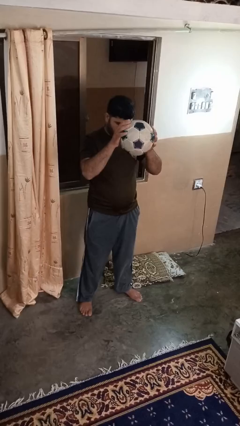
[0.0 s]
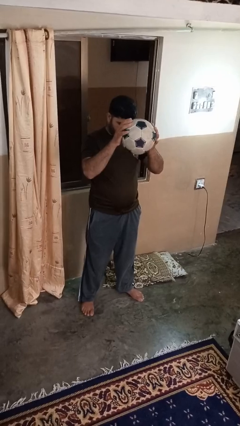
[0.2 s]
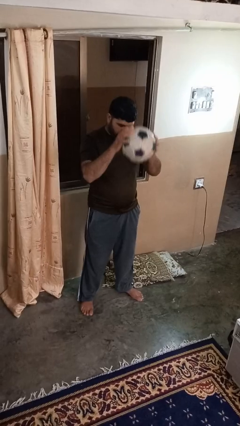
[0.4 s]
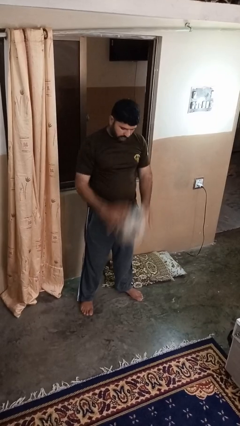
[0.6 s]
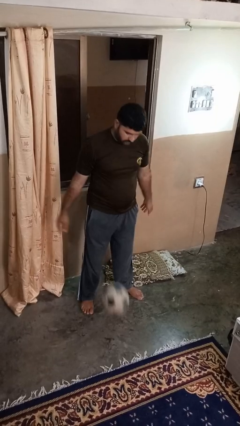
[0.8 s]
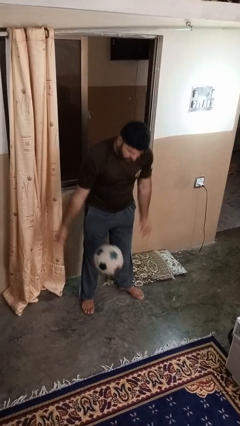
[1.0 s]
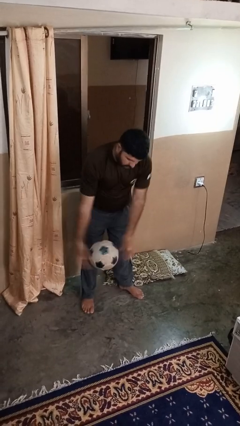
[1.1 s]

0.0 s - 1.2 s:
person bounces ball on floor

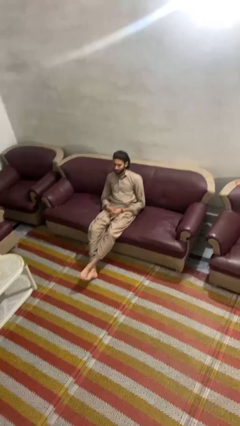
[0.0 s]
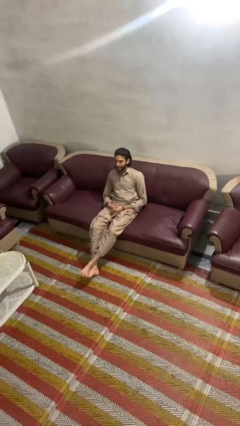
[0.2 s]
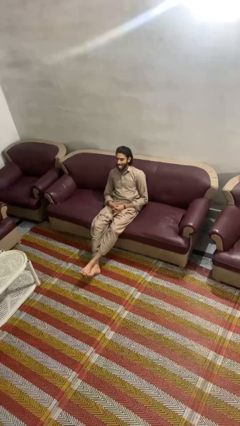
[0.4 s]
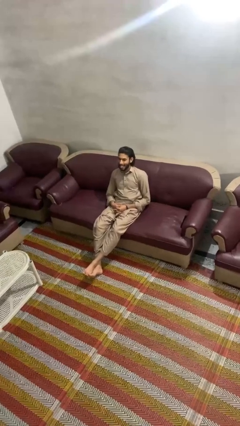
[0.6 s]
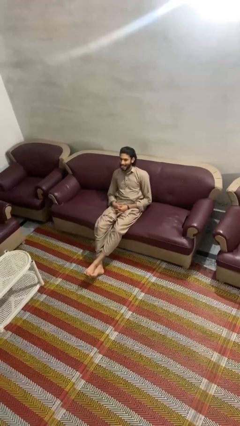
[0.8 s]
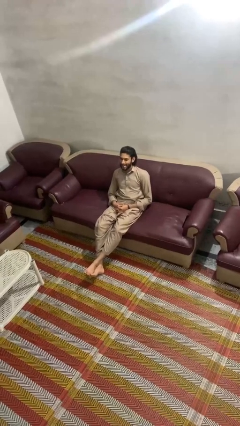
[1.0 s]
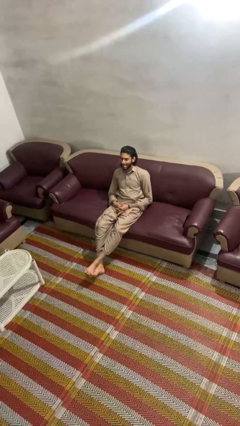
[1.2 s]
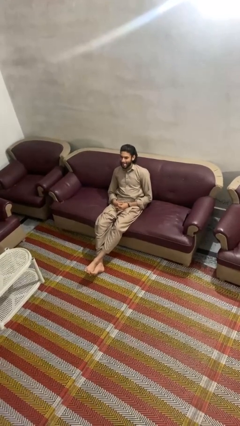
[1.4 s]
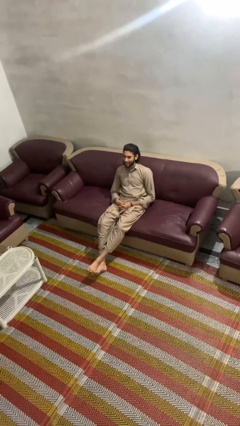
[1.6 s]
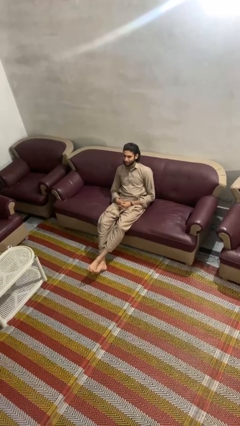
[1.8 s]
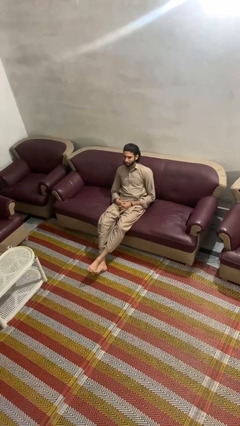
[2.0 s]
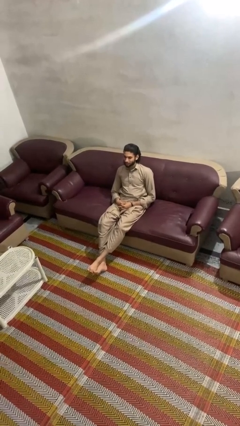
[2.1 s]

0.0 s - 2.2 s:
person sticks out tongue

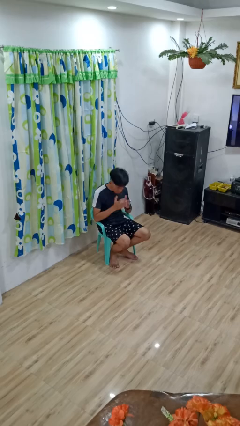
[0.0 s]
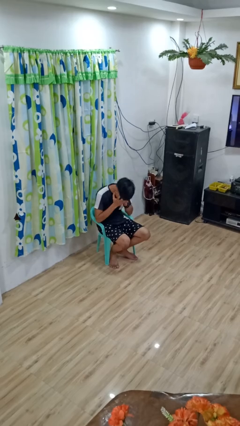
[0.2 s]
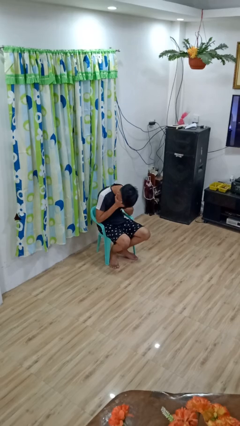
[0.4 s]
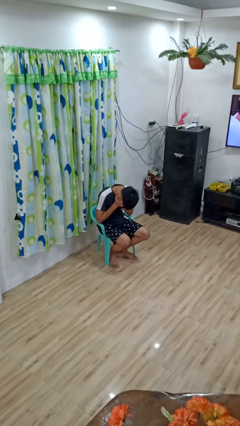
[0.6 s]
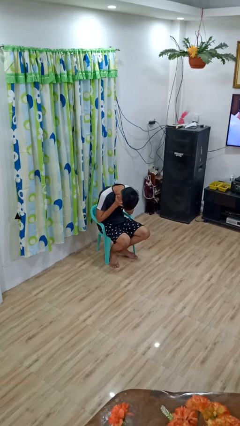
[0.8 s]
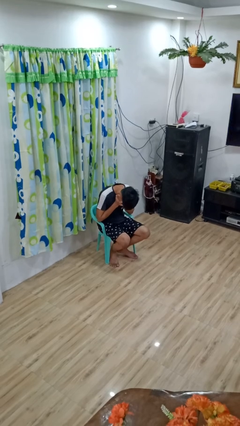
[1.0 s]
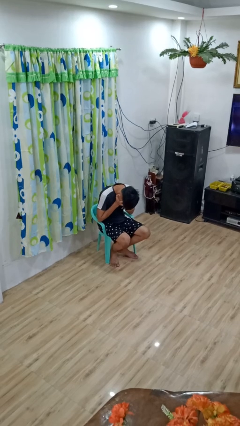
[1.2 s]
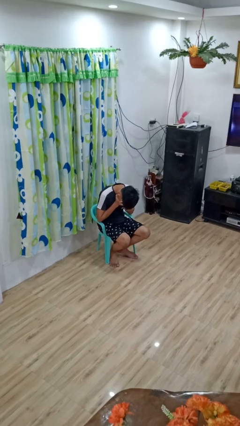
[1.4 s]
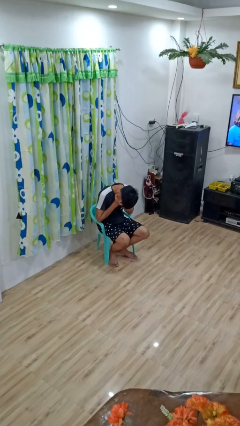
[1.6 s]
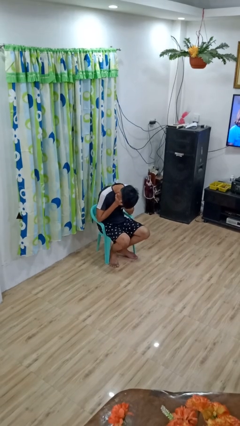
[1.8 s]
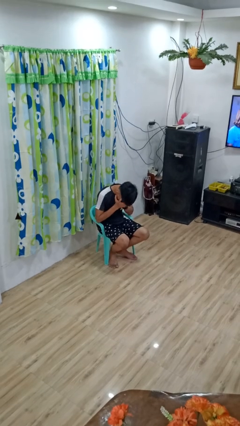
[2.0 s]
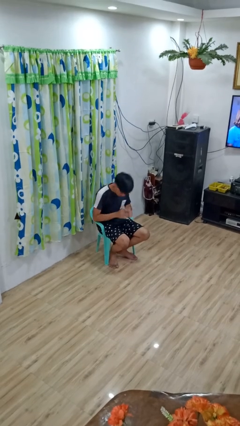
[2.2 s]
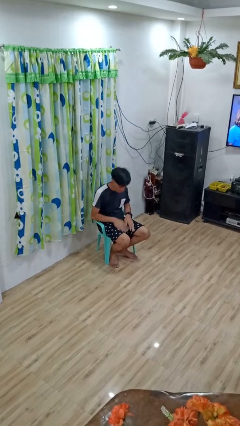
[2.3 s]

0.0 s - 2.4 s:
person covers face with hands

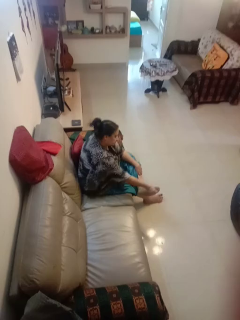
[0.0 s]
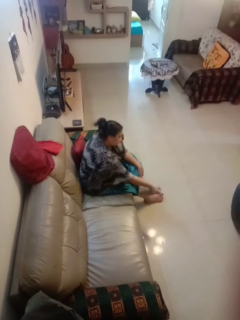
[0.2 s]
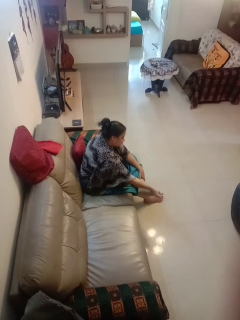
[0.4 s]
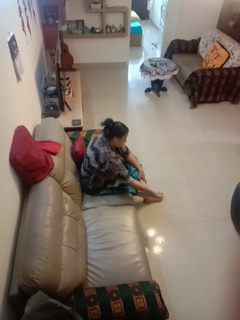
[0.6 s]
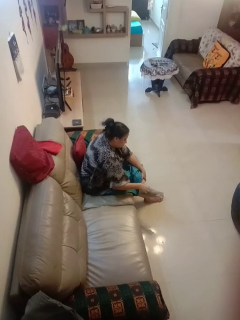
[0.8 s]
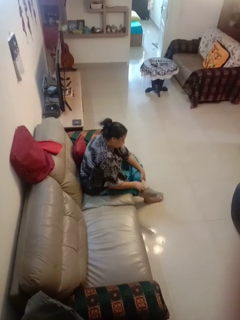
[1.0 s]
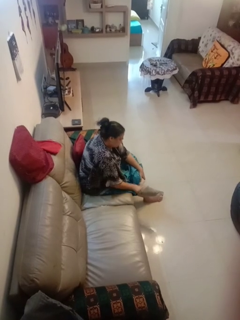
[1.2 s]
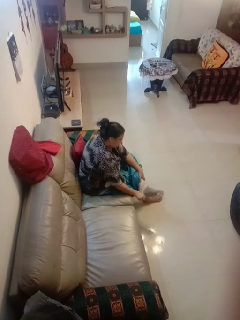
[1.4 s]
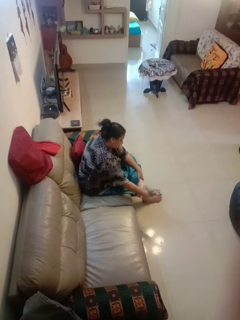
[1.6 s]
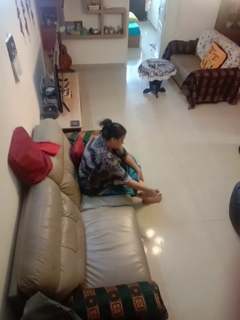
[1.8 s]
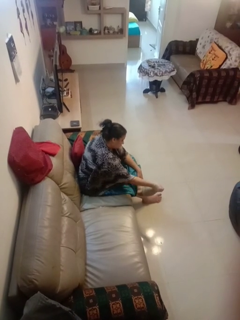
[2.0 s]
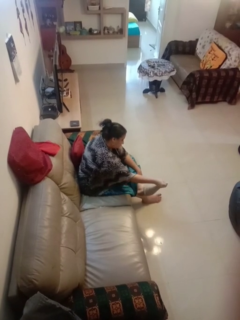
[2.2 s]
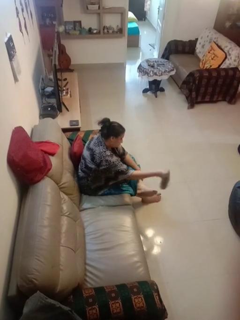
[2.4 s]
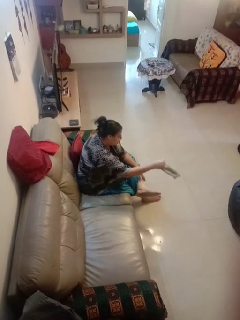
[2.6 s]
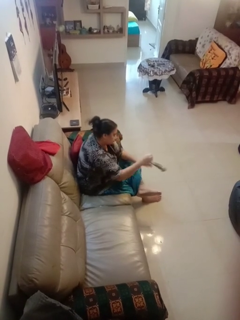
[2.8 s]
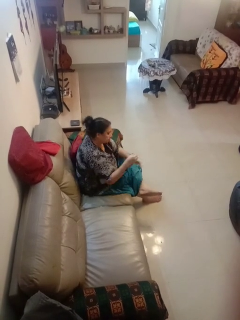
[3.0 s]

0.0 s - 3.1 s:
person takes off socks

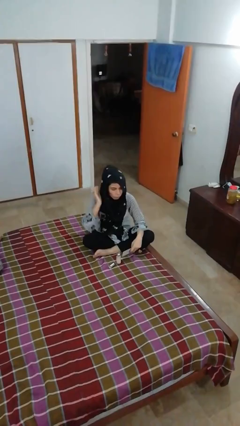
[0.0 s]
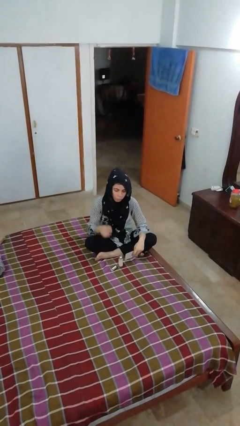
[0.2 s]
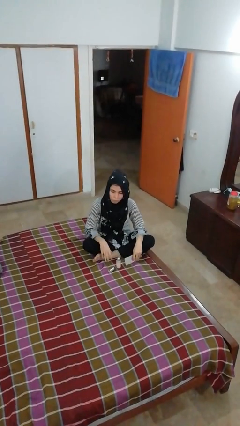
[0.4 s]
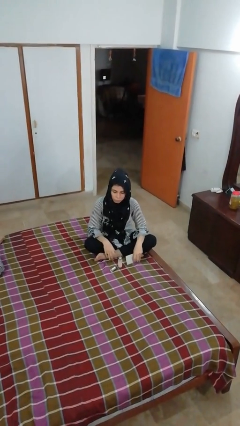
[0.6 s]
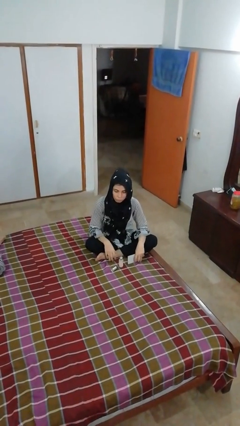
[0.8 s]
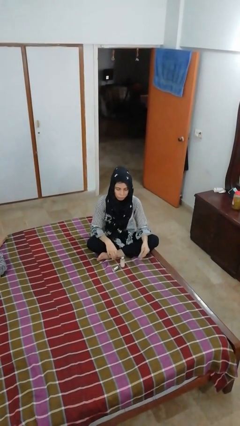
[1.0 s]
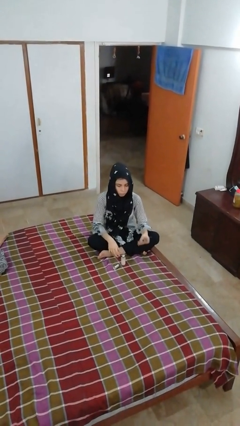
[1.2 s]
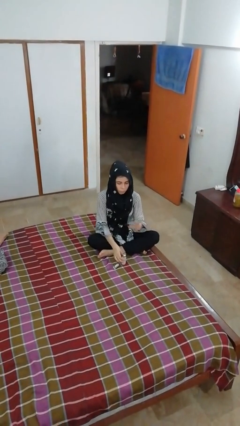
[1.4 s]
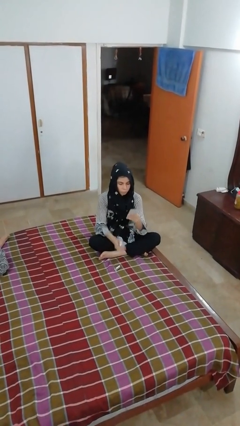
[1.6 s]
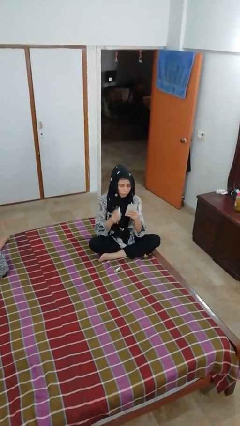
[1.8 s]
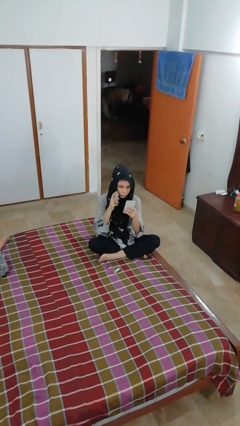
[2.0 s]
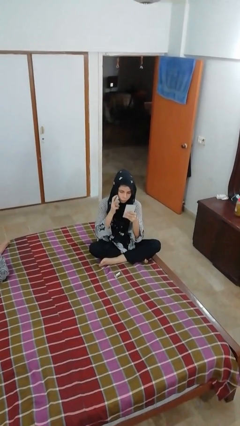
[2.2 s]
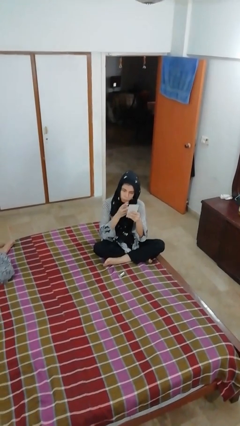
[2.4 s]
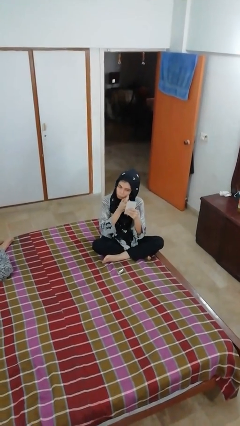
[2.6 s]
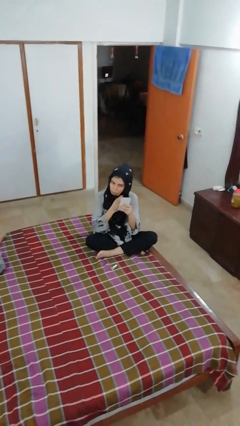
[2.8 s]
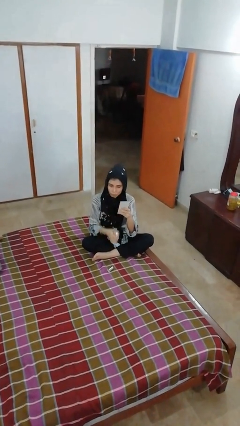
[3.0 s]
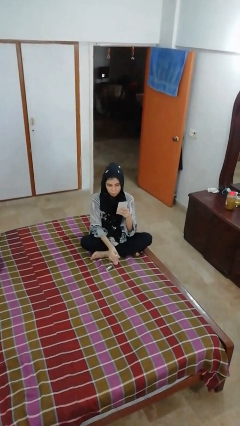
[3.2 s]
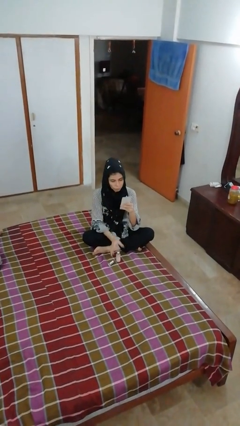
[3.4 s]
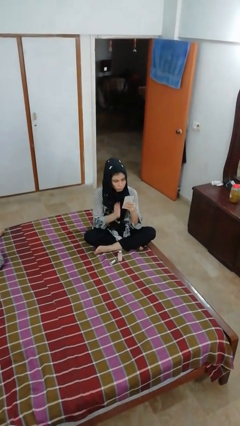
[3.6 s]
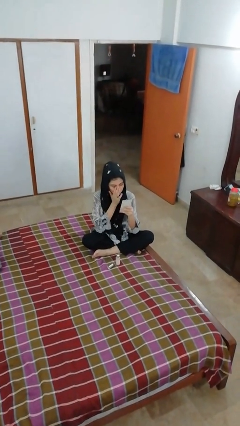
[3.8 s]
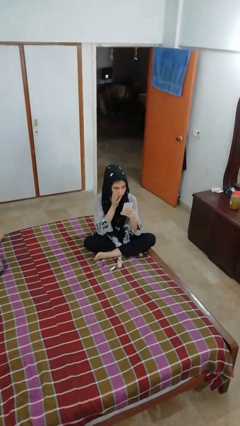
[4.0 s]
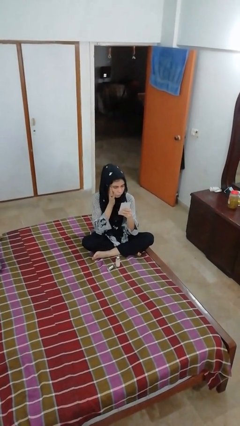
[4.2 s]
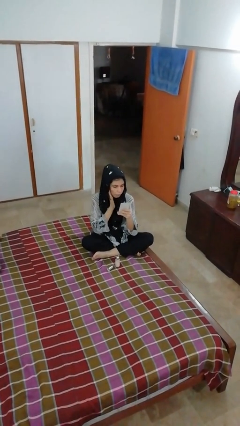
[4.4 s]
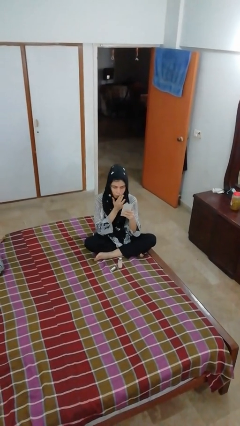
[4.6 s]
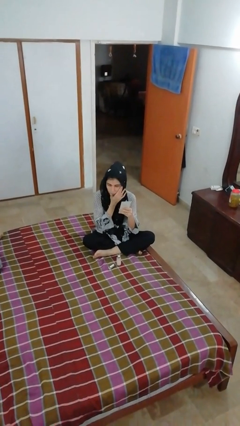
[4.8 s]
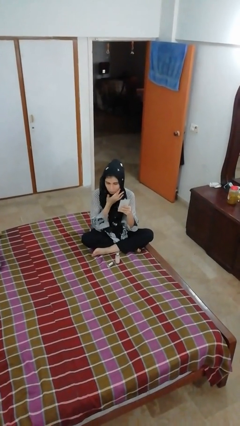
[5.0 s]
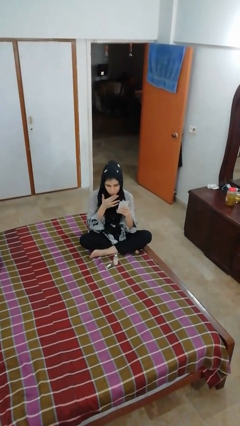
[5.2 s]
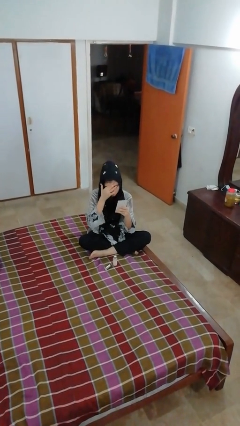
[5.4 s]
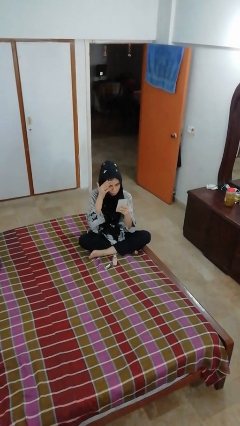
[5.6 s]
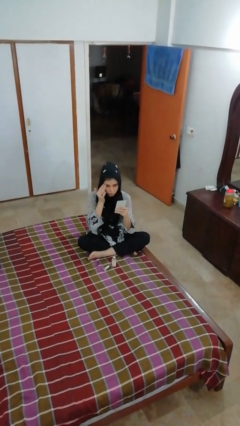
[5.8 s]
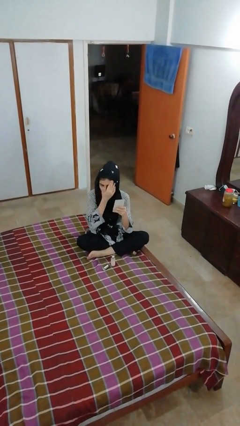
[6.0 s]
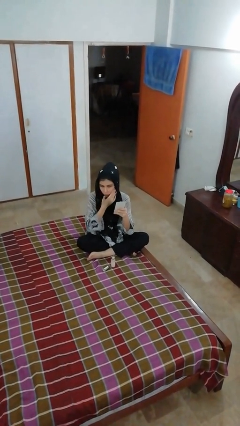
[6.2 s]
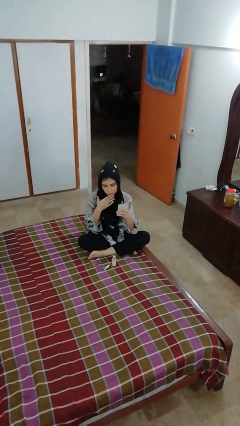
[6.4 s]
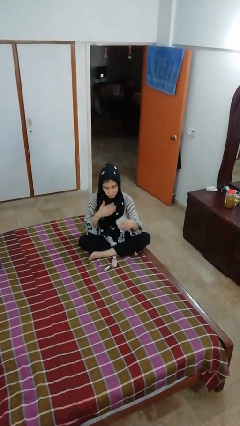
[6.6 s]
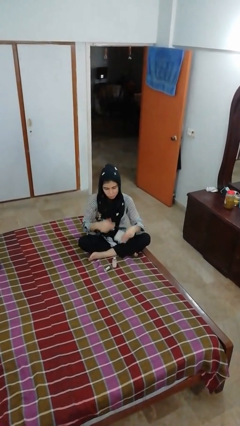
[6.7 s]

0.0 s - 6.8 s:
person applies foundation makeup

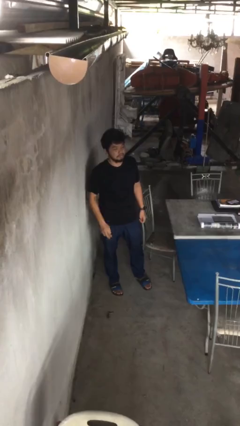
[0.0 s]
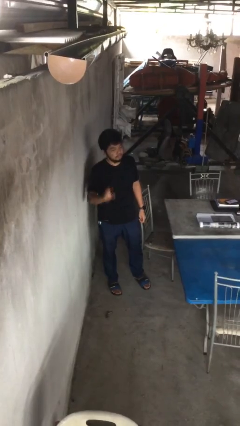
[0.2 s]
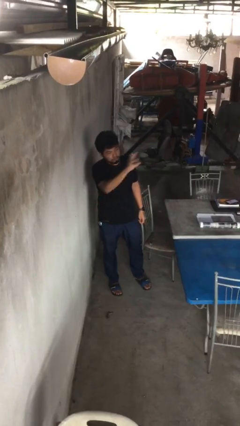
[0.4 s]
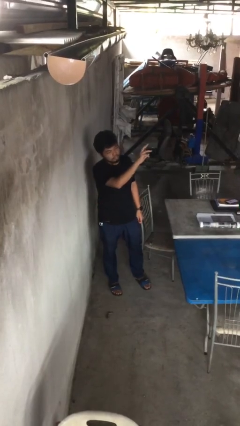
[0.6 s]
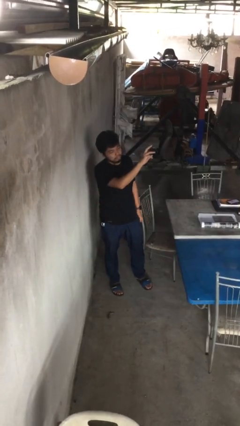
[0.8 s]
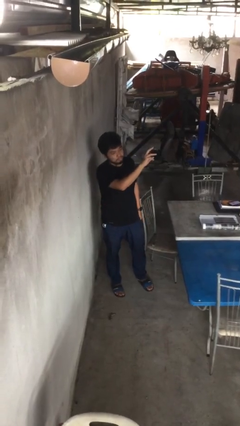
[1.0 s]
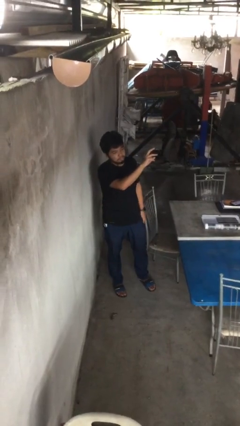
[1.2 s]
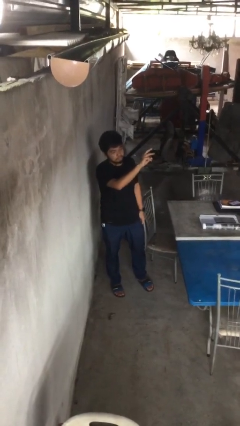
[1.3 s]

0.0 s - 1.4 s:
person gestures swipe left

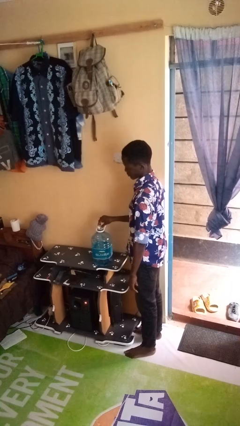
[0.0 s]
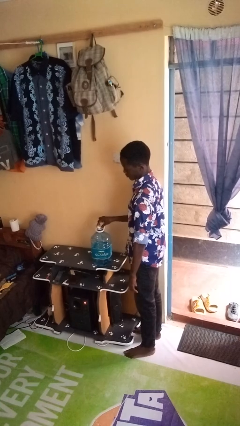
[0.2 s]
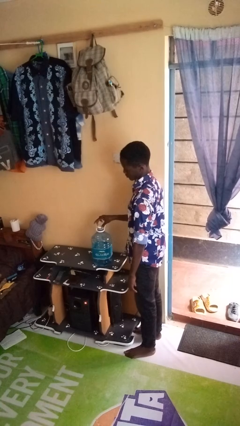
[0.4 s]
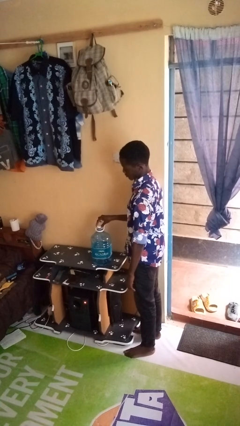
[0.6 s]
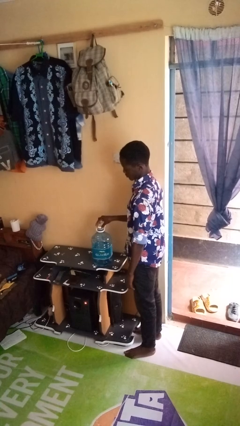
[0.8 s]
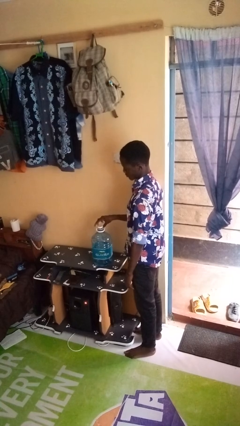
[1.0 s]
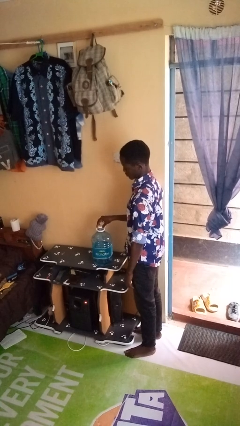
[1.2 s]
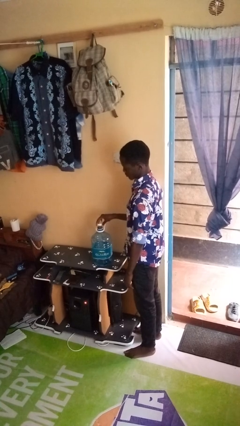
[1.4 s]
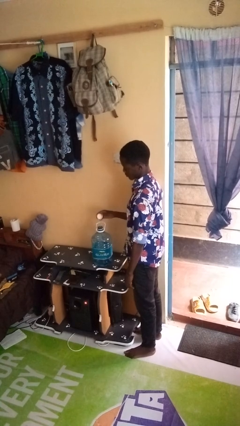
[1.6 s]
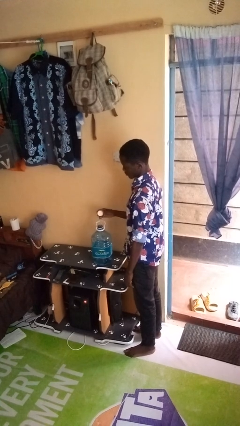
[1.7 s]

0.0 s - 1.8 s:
person unscrews lid from bottle
